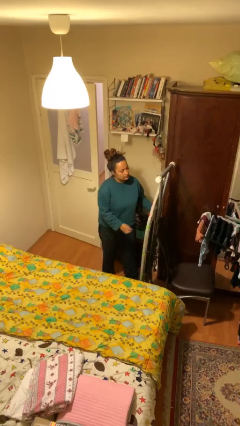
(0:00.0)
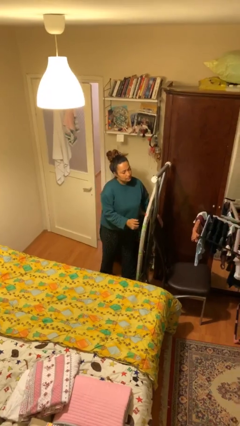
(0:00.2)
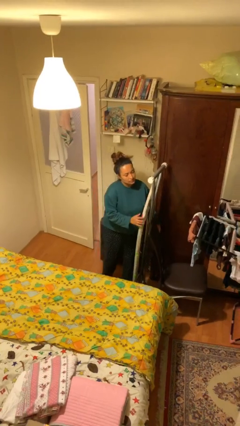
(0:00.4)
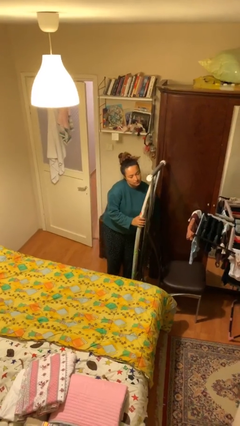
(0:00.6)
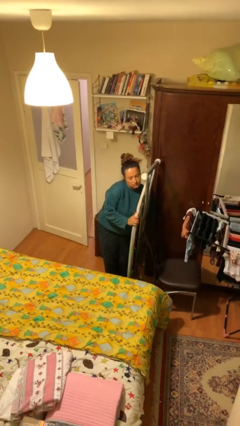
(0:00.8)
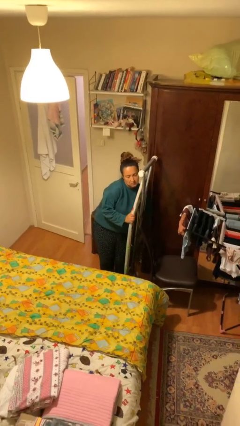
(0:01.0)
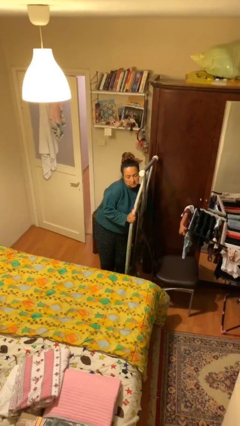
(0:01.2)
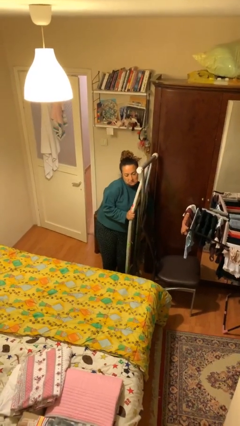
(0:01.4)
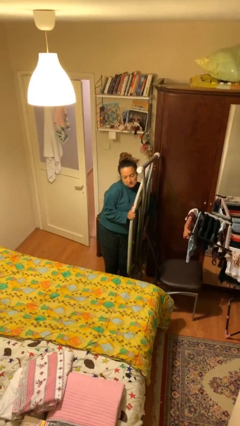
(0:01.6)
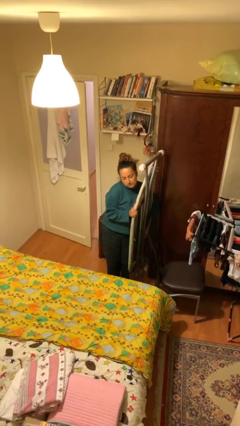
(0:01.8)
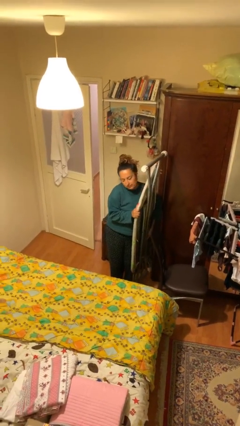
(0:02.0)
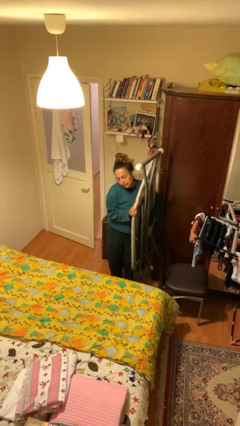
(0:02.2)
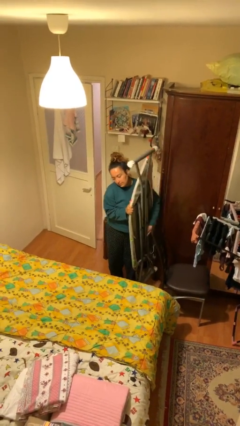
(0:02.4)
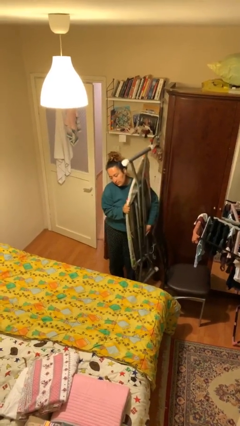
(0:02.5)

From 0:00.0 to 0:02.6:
person picks up object from floor

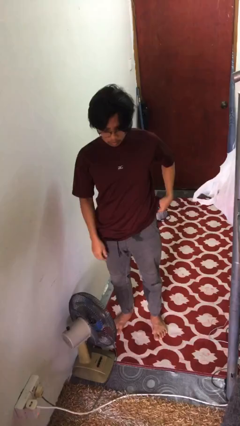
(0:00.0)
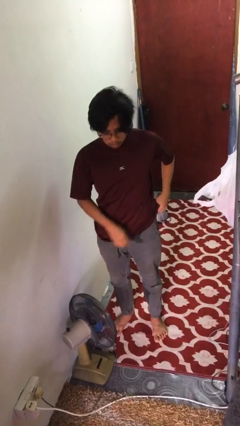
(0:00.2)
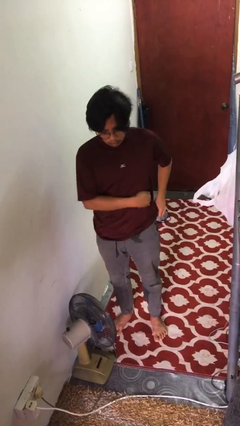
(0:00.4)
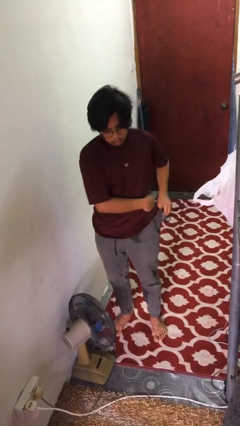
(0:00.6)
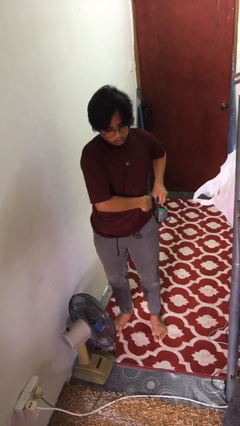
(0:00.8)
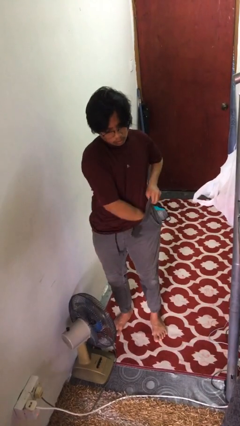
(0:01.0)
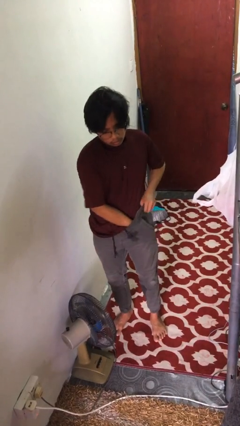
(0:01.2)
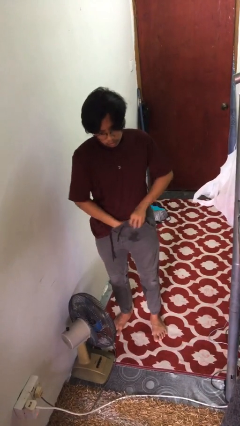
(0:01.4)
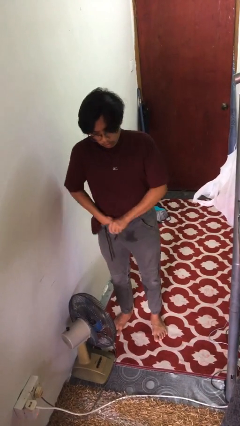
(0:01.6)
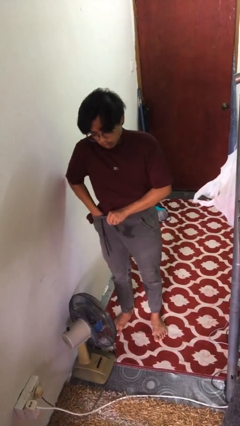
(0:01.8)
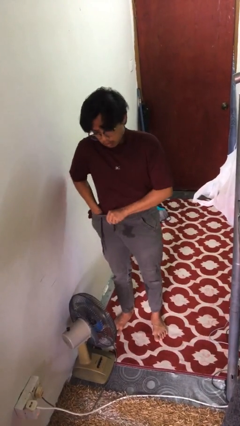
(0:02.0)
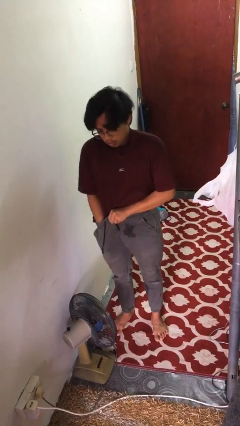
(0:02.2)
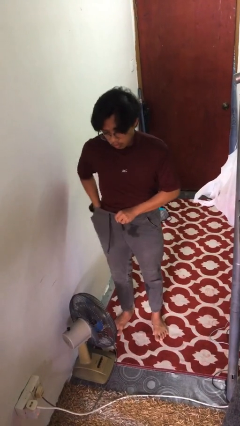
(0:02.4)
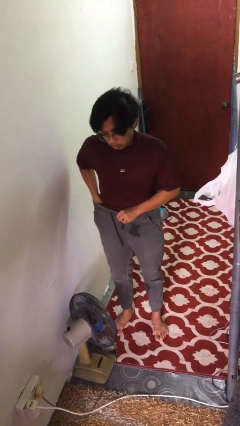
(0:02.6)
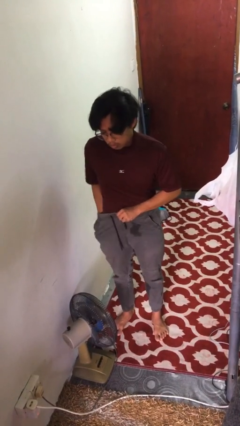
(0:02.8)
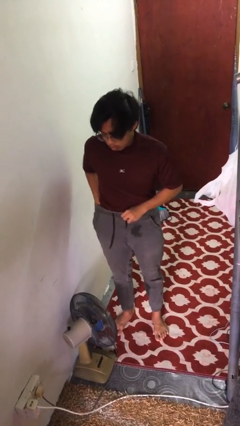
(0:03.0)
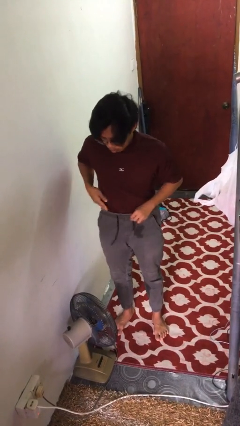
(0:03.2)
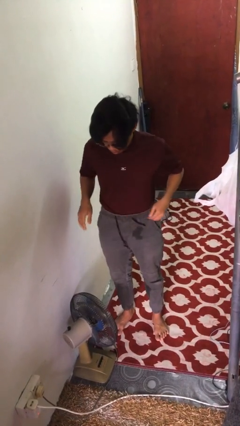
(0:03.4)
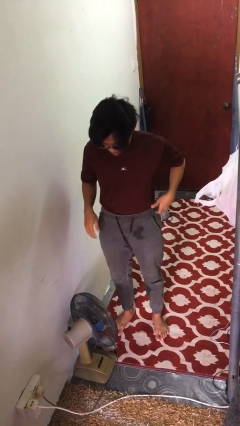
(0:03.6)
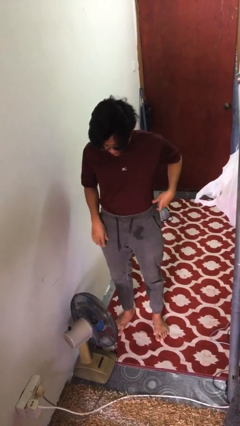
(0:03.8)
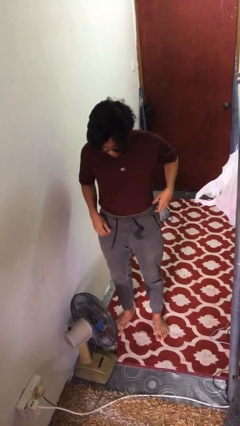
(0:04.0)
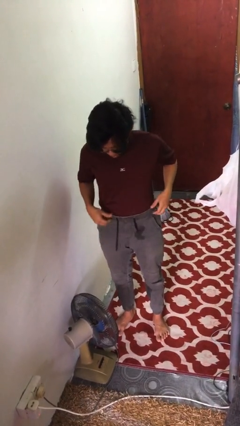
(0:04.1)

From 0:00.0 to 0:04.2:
person tucks in shirt

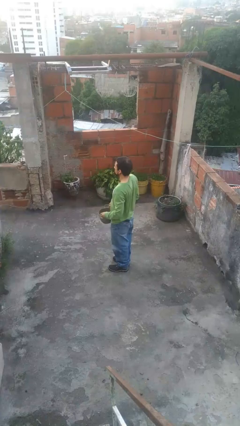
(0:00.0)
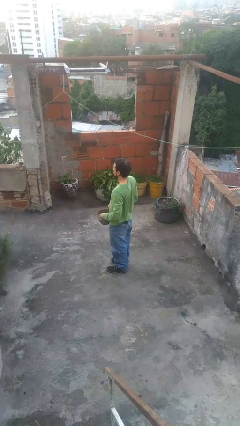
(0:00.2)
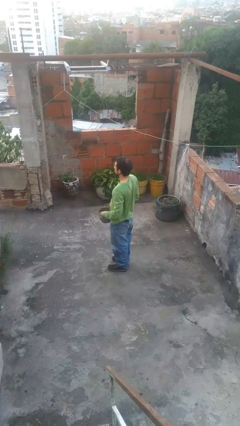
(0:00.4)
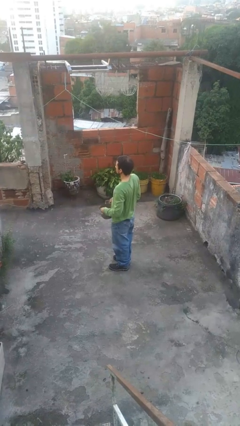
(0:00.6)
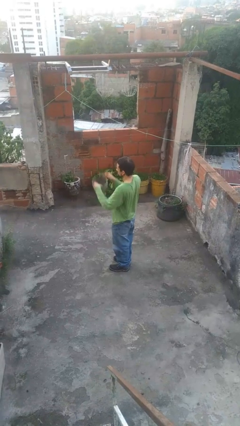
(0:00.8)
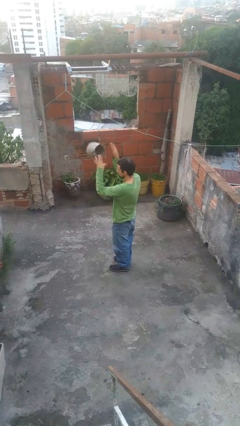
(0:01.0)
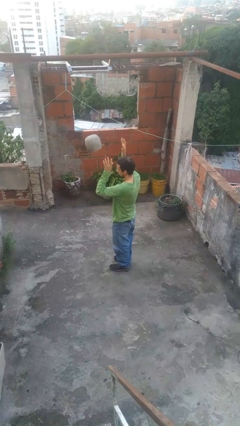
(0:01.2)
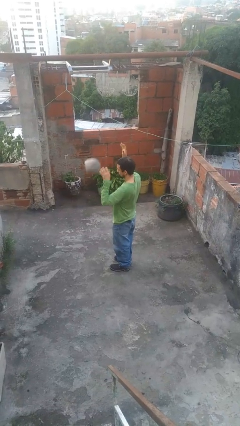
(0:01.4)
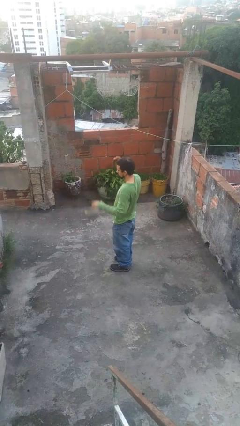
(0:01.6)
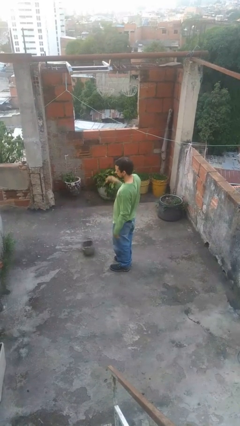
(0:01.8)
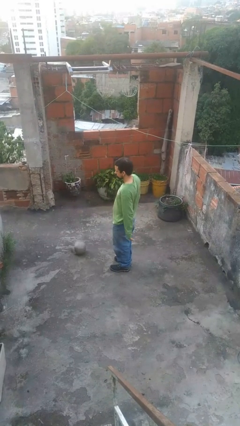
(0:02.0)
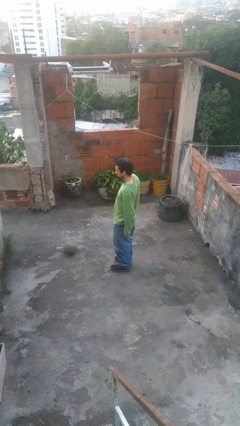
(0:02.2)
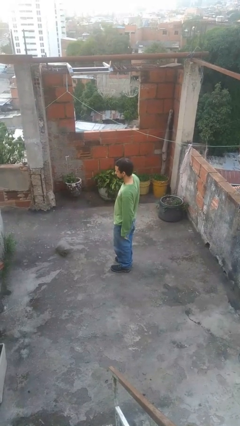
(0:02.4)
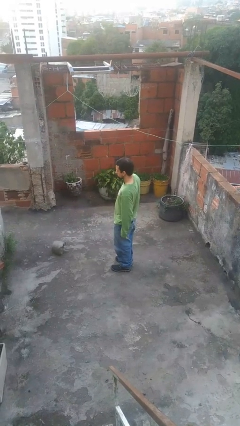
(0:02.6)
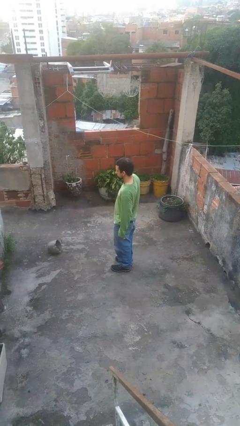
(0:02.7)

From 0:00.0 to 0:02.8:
person throws object into air

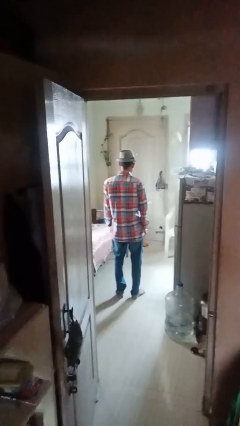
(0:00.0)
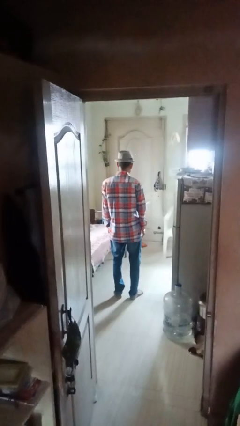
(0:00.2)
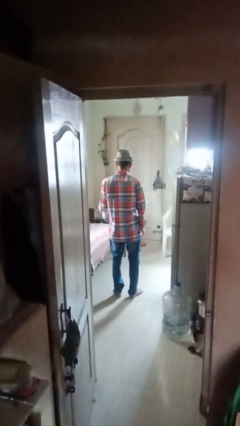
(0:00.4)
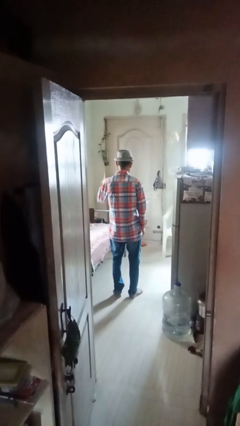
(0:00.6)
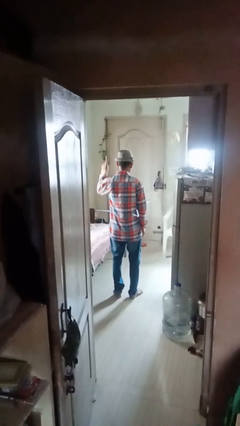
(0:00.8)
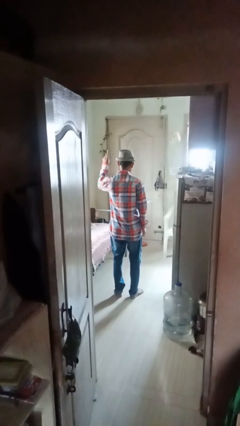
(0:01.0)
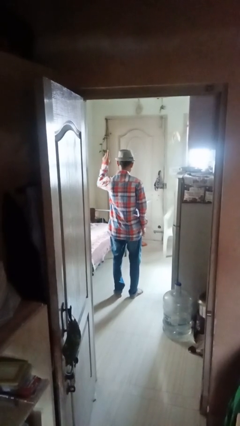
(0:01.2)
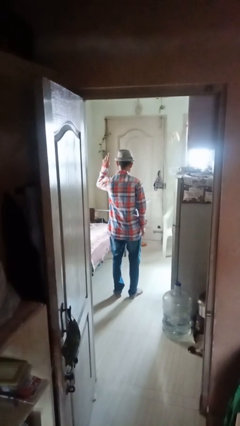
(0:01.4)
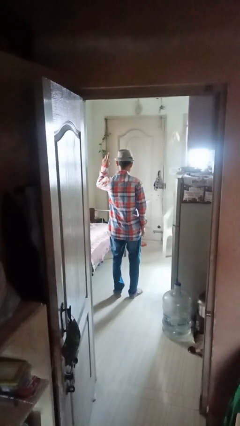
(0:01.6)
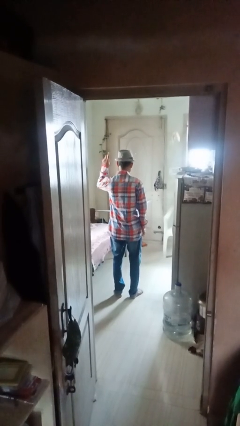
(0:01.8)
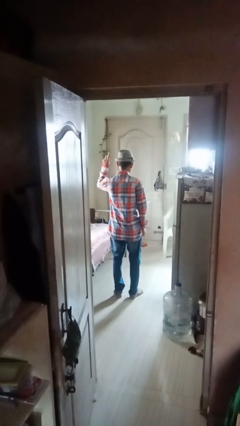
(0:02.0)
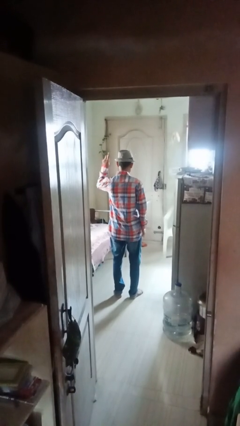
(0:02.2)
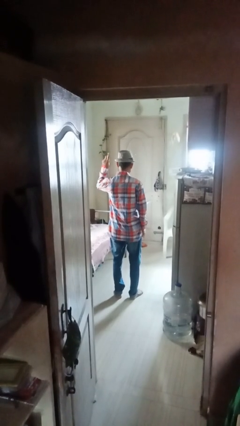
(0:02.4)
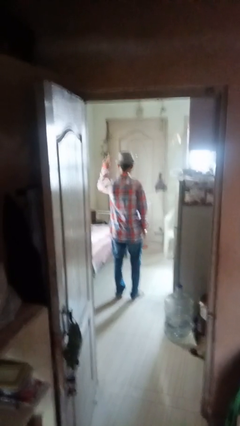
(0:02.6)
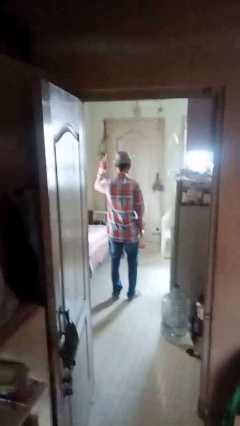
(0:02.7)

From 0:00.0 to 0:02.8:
person gestures number one

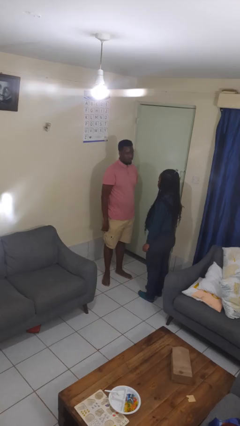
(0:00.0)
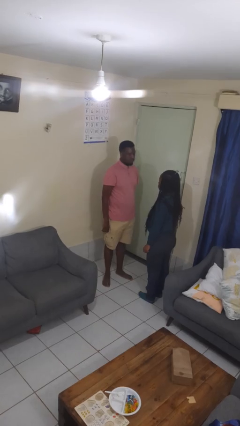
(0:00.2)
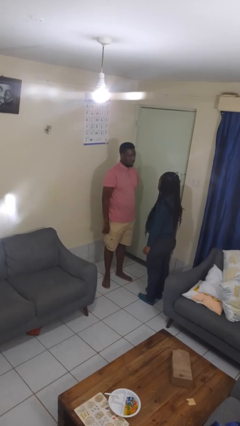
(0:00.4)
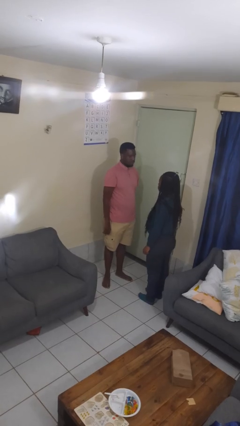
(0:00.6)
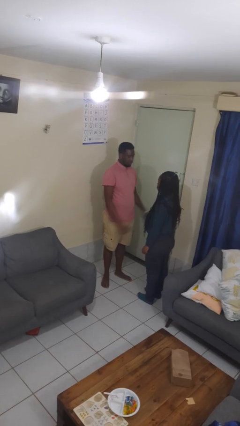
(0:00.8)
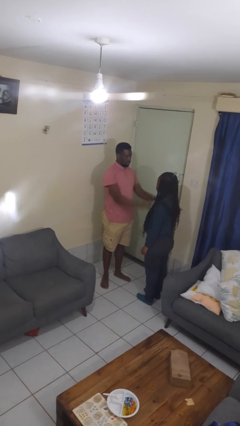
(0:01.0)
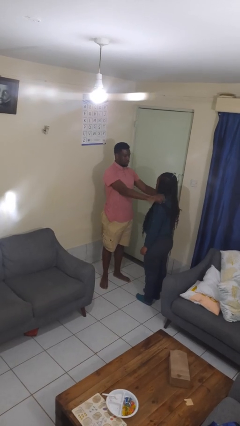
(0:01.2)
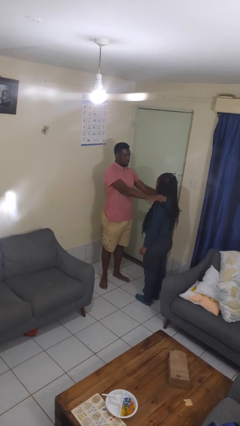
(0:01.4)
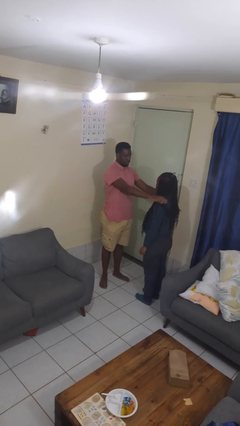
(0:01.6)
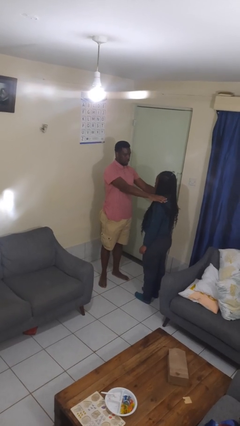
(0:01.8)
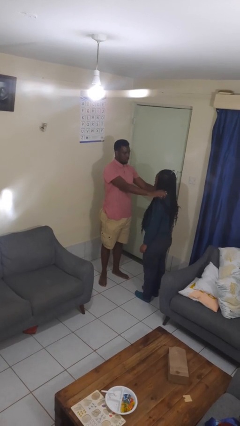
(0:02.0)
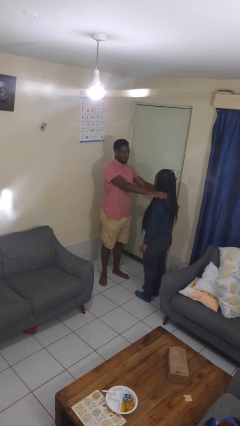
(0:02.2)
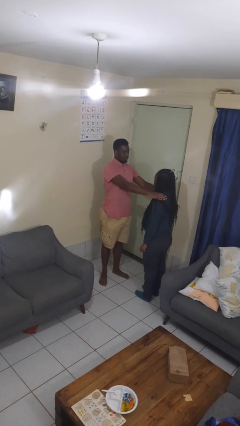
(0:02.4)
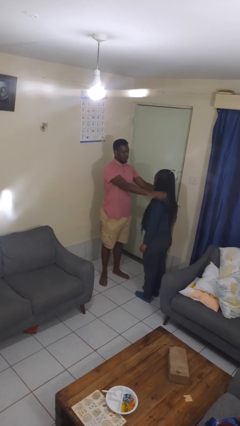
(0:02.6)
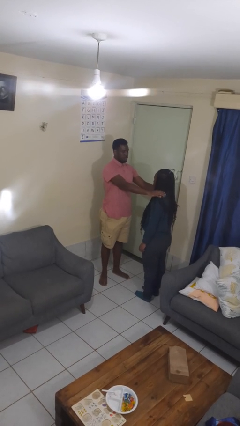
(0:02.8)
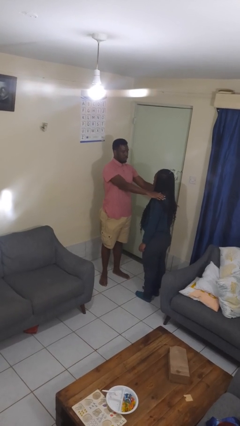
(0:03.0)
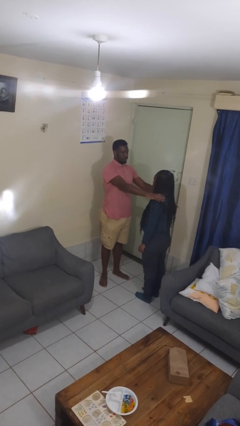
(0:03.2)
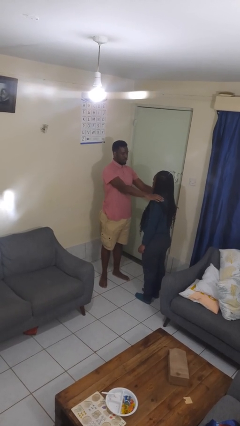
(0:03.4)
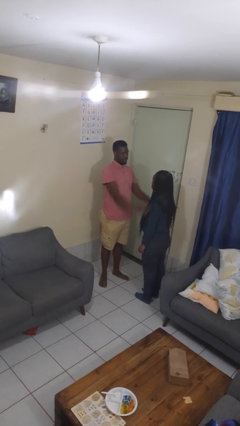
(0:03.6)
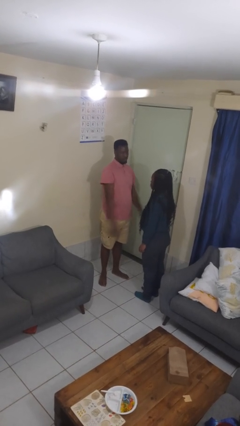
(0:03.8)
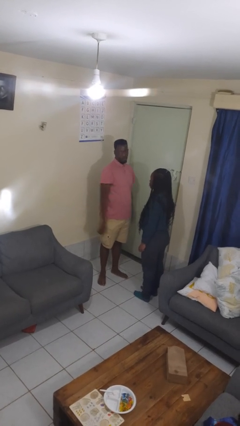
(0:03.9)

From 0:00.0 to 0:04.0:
person pounds shoulders of person

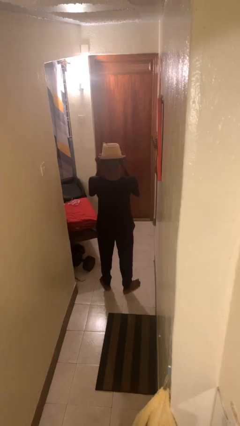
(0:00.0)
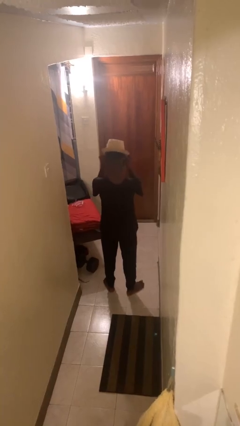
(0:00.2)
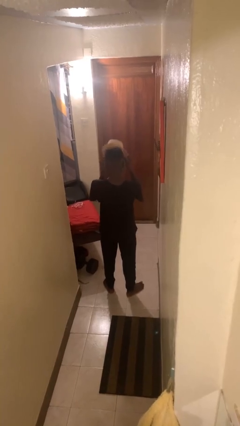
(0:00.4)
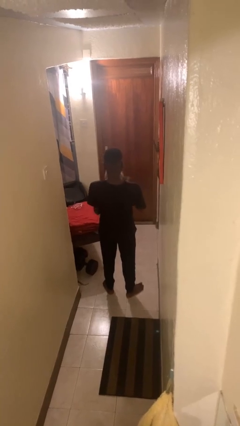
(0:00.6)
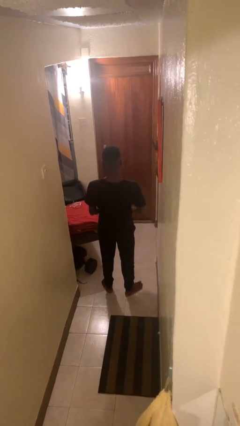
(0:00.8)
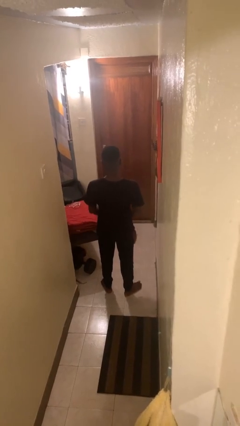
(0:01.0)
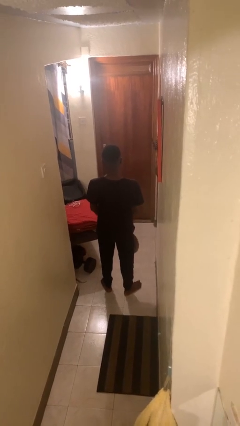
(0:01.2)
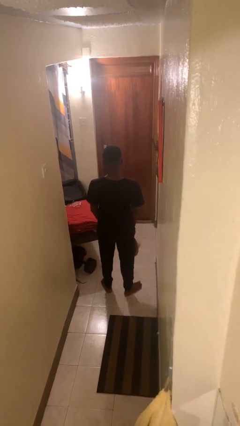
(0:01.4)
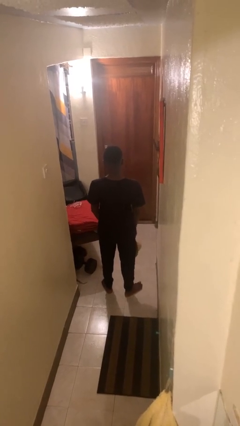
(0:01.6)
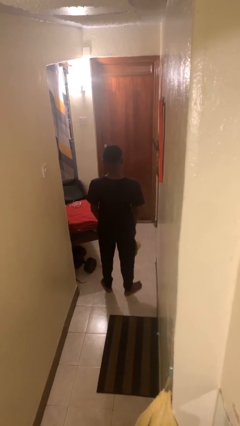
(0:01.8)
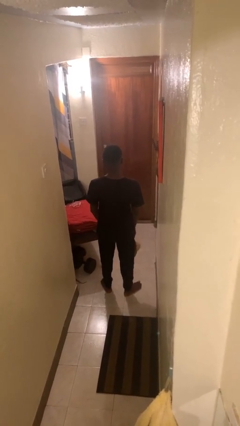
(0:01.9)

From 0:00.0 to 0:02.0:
person takes off hat
